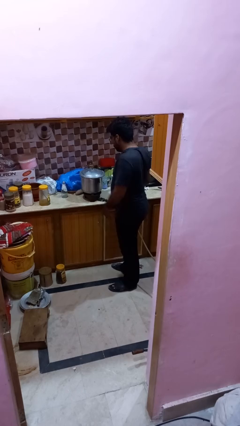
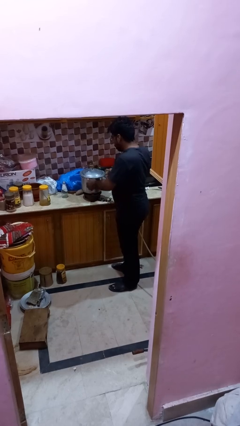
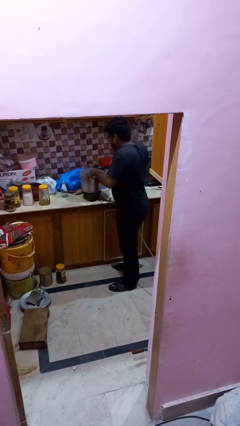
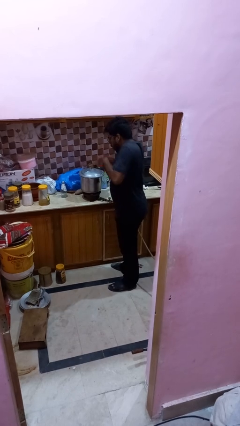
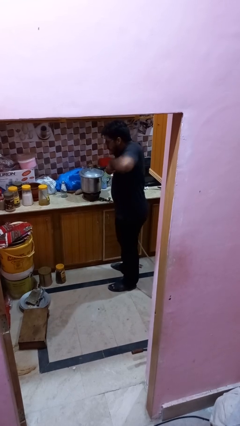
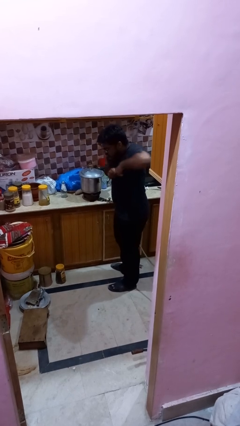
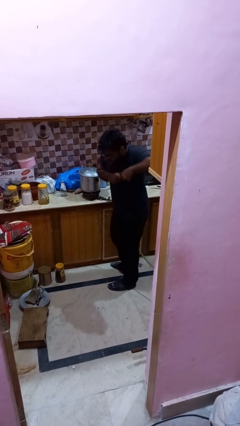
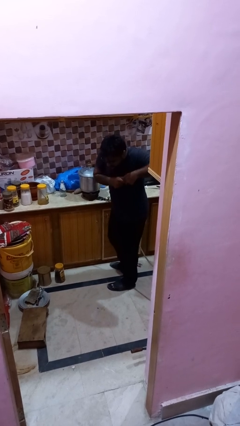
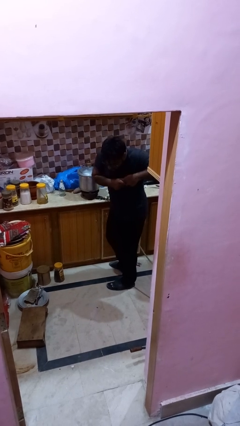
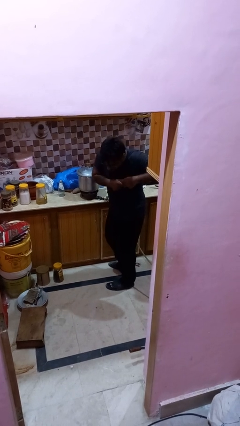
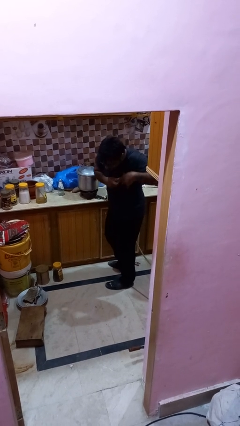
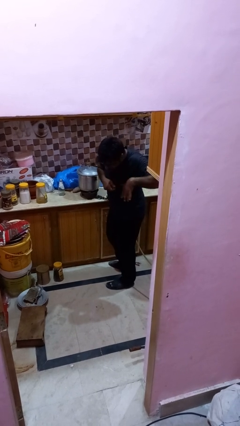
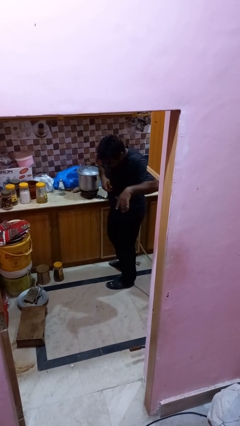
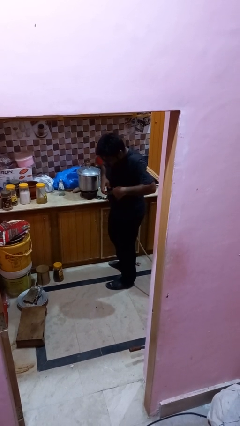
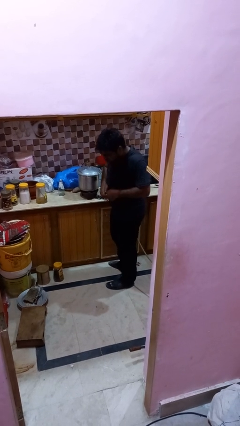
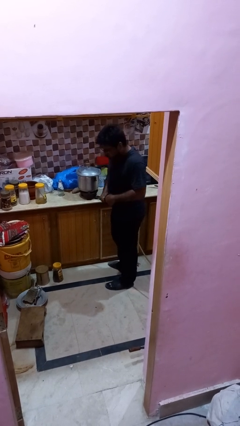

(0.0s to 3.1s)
person burns hand

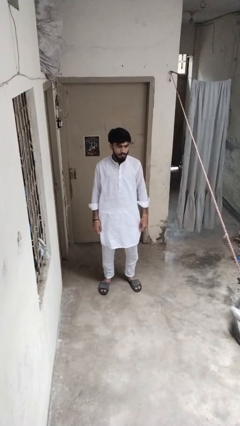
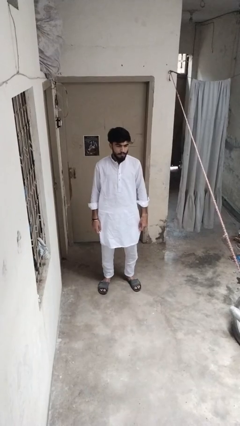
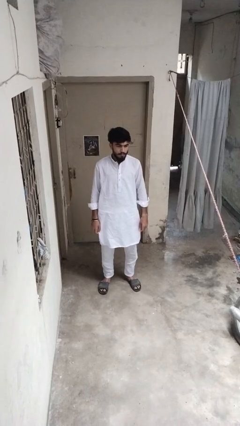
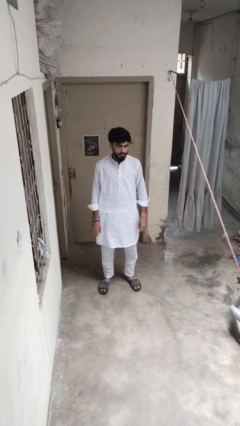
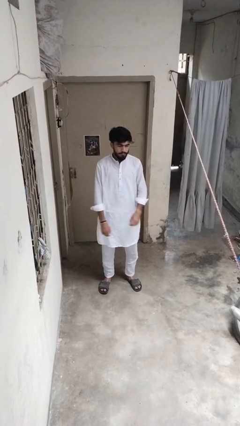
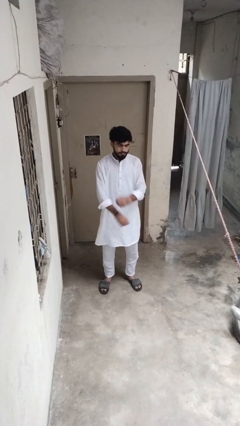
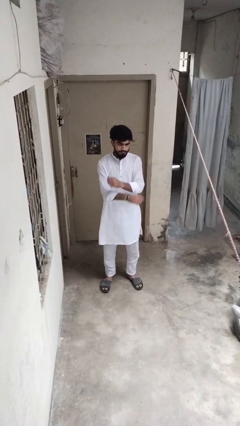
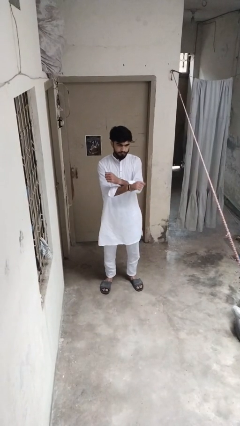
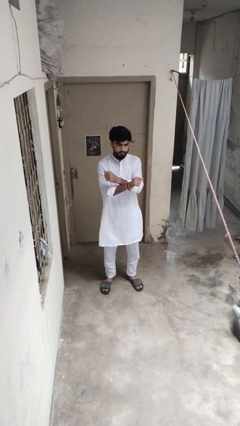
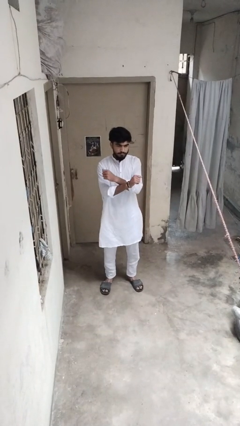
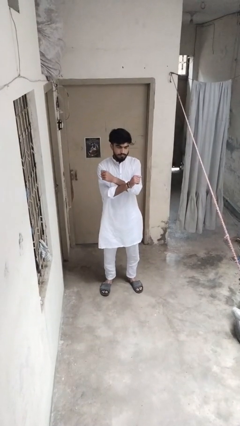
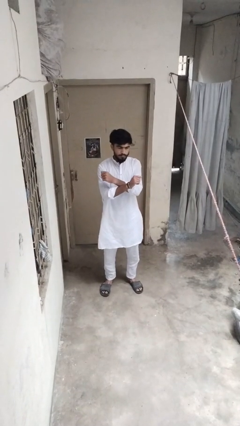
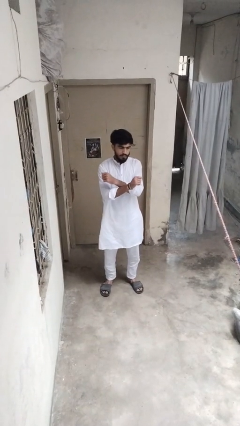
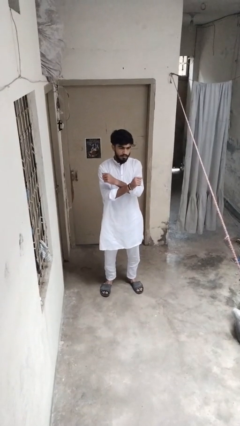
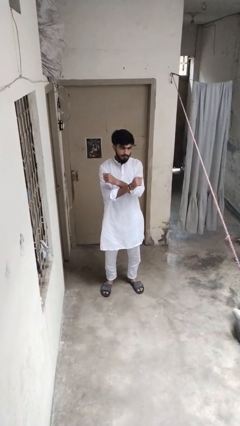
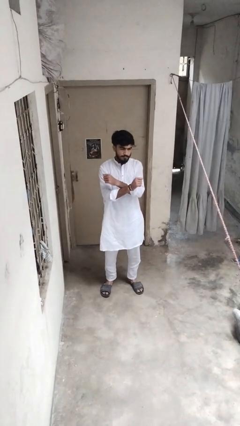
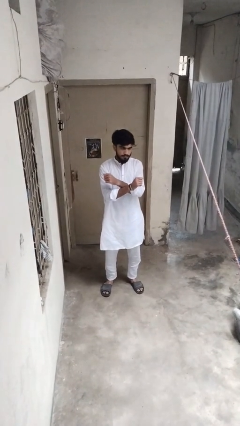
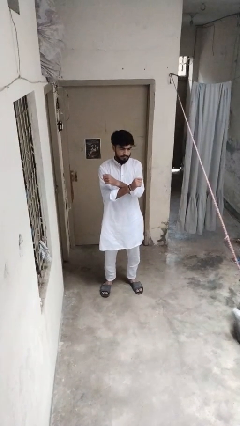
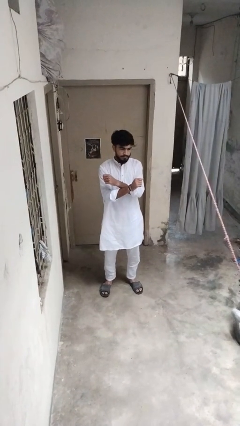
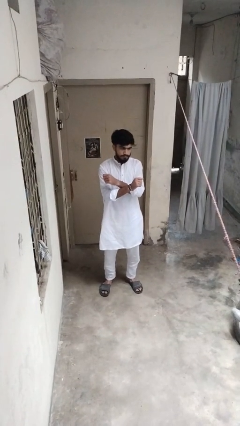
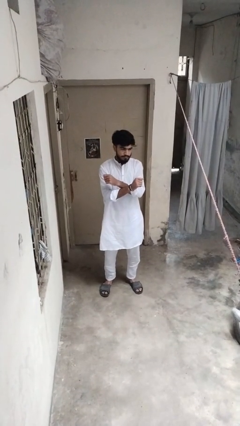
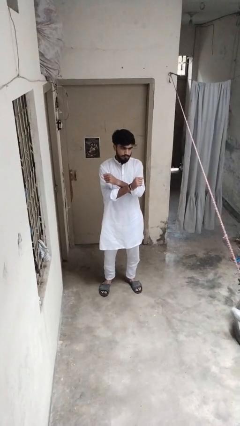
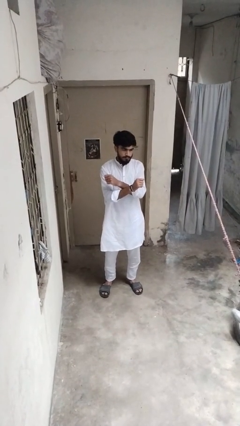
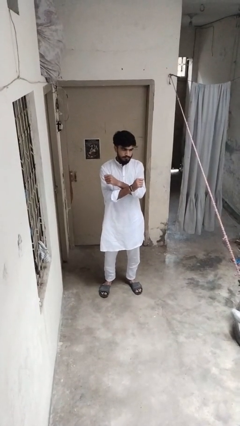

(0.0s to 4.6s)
person gestures arms x

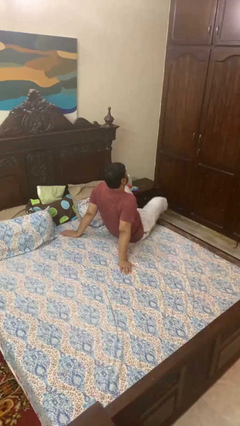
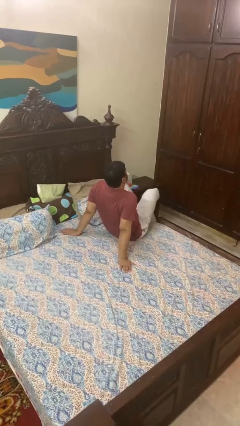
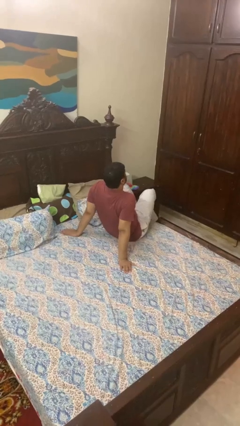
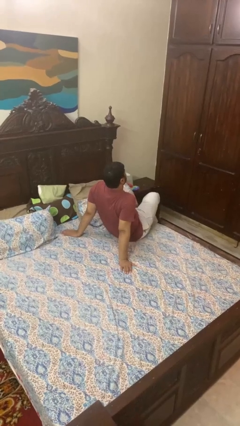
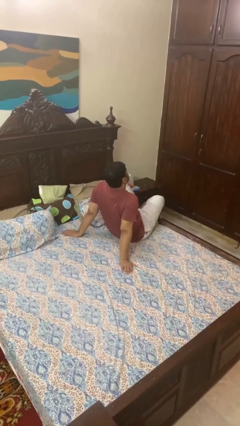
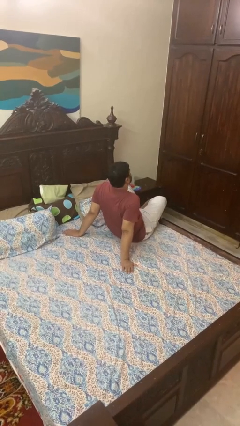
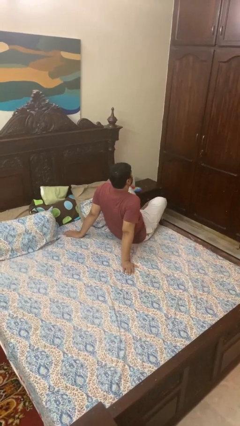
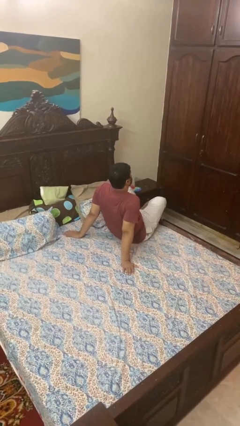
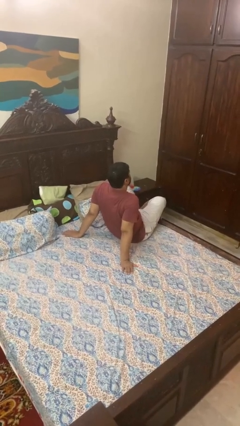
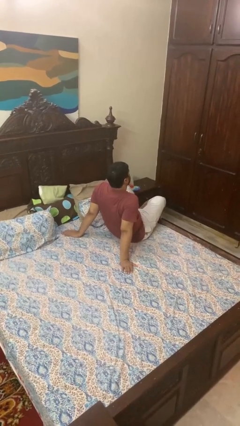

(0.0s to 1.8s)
person crosses legs

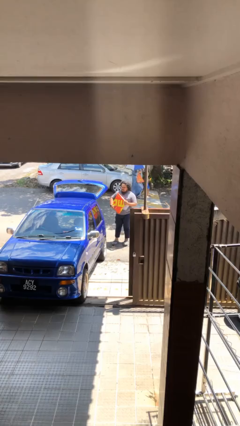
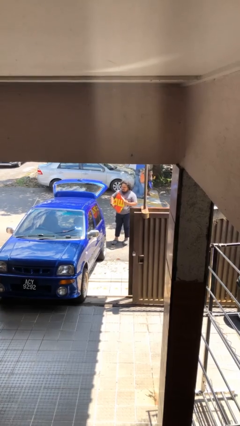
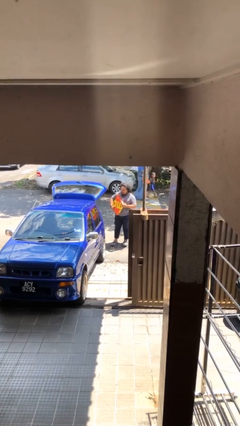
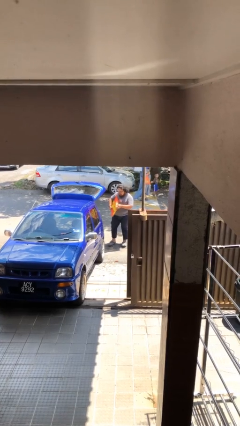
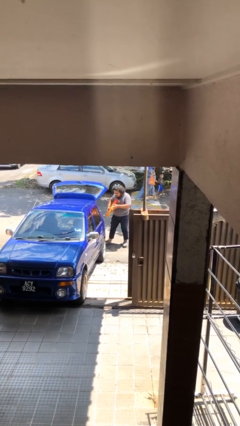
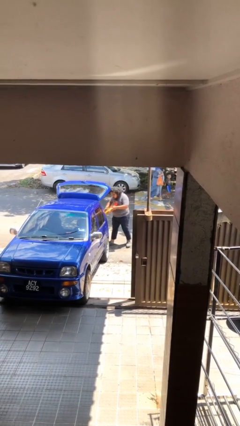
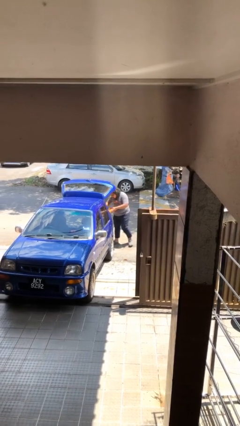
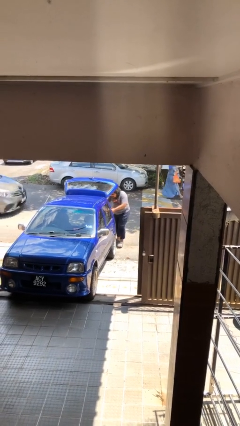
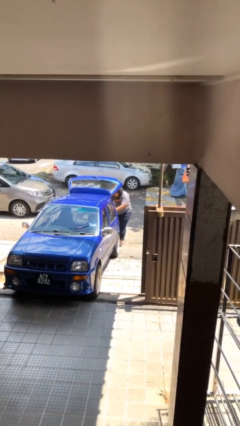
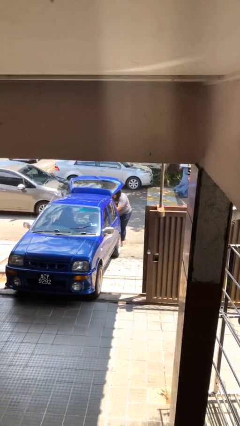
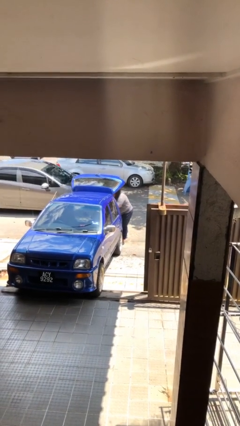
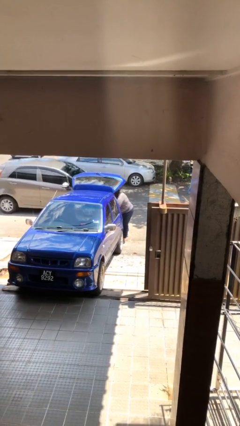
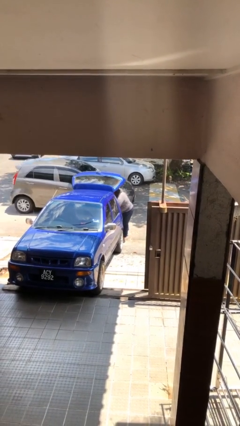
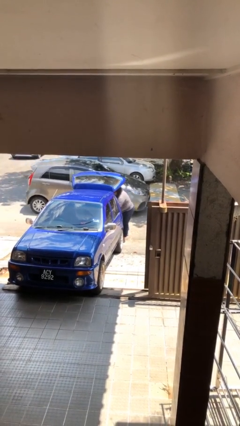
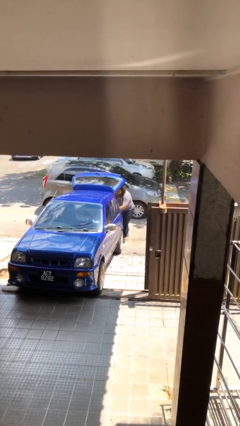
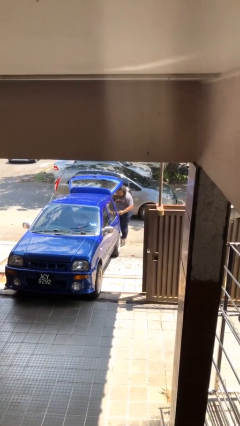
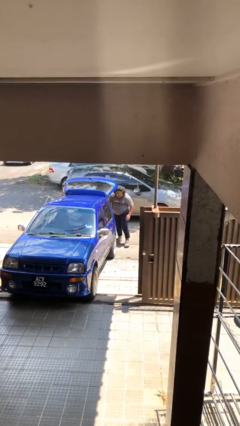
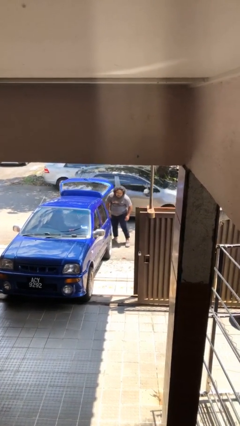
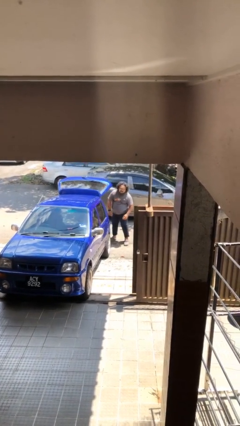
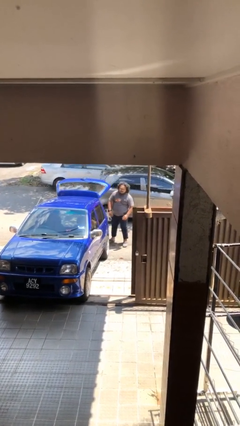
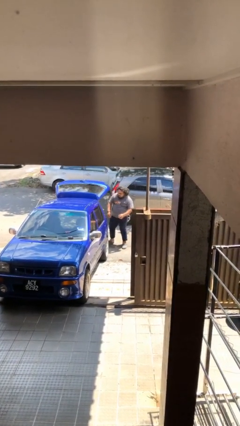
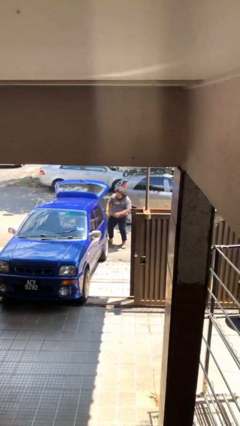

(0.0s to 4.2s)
person loads car

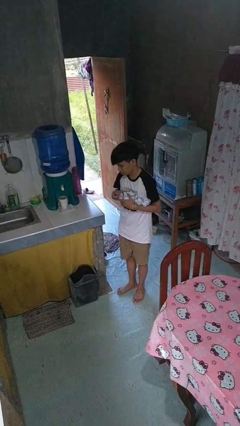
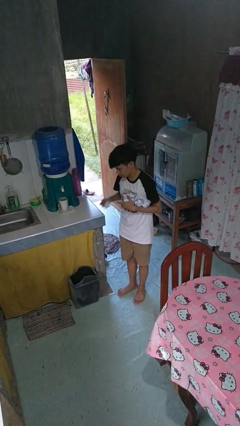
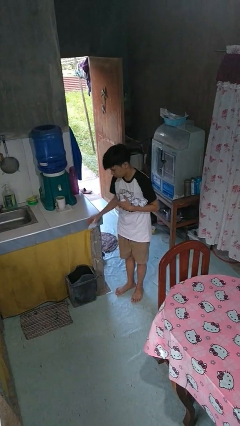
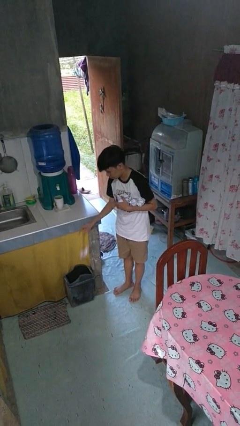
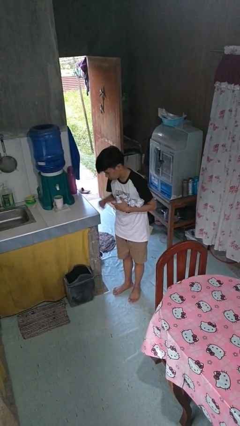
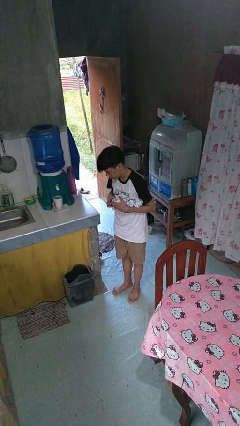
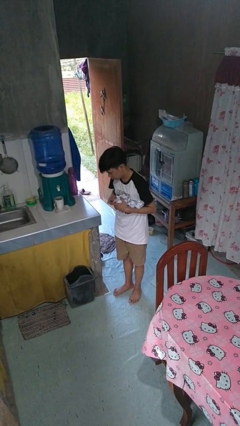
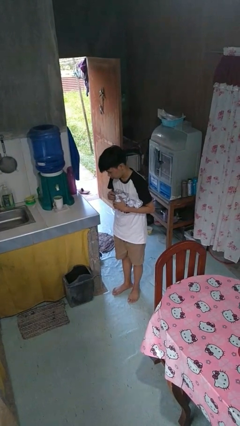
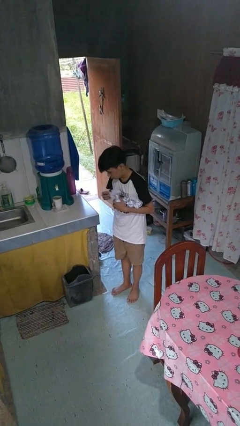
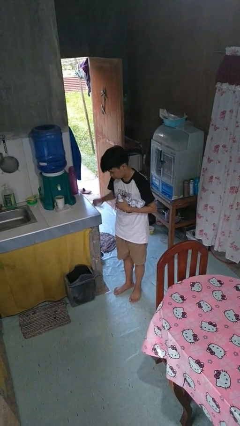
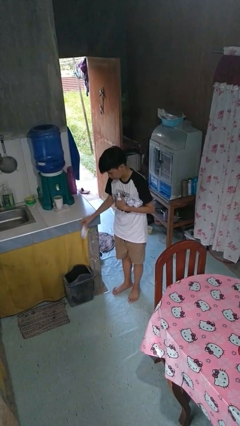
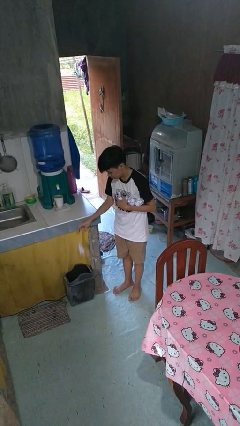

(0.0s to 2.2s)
person discards trash

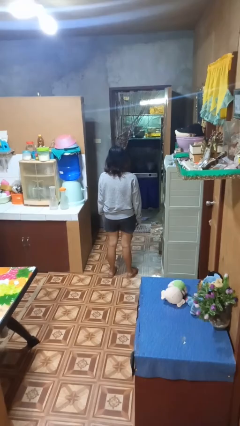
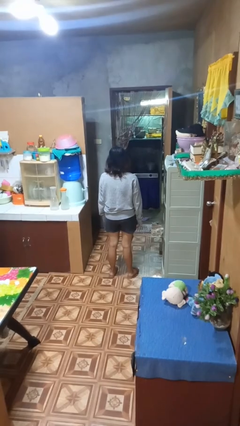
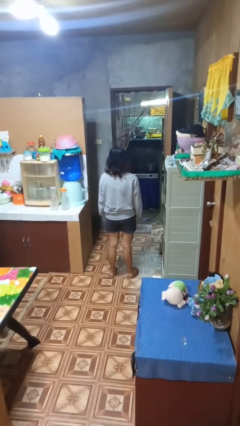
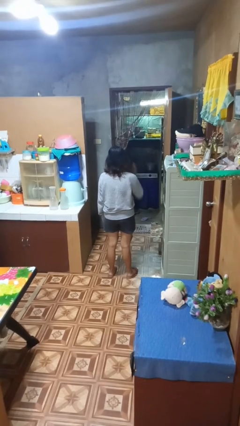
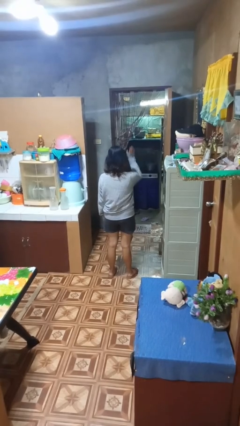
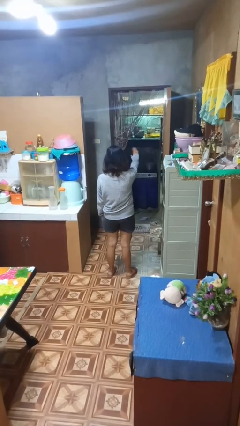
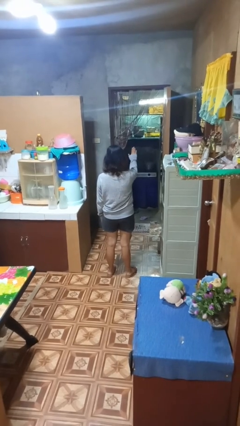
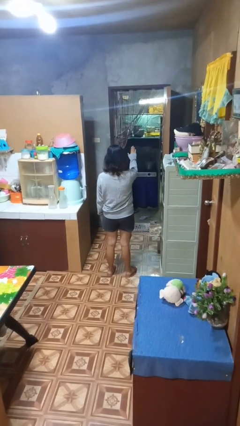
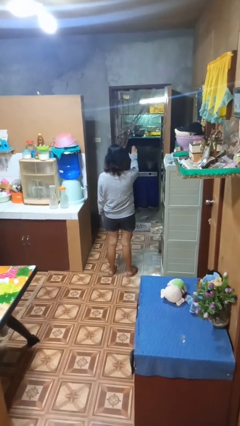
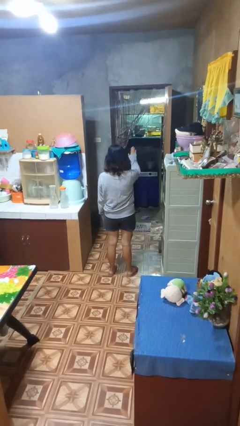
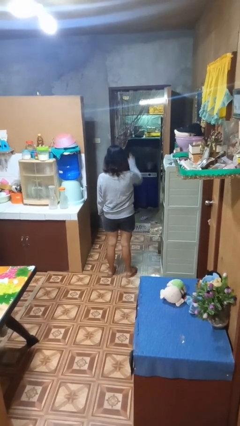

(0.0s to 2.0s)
person gestures stop
